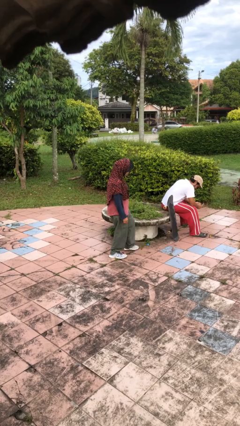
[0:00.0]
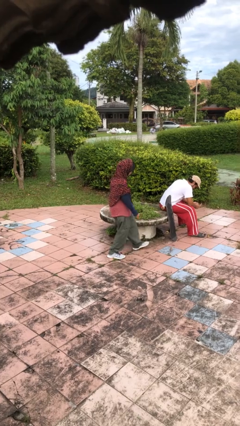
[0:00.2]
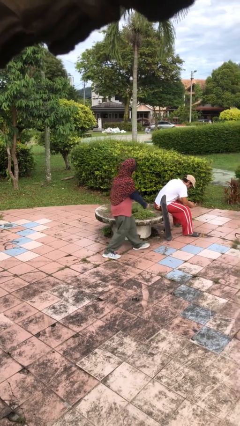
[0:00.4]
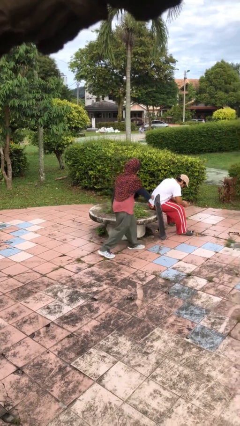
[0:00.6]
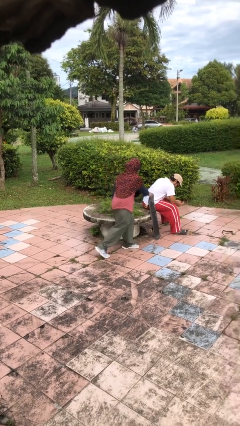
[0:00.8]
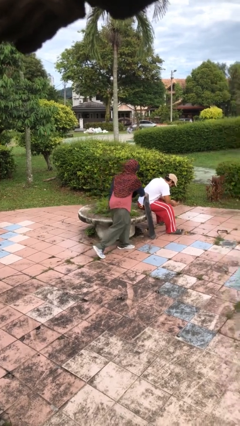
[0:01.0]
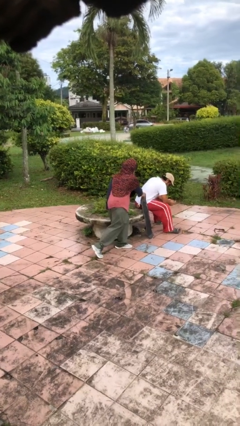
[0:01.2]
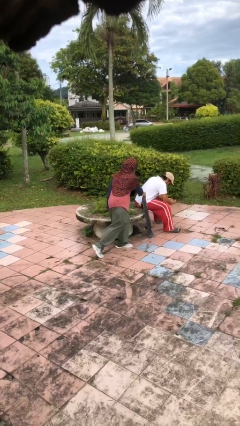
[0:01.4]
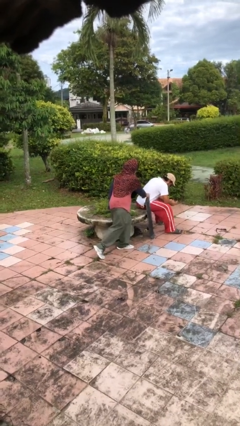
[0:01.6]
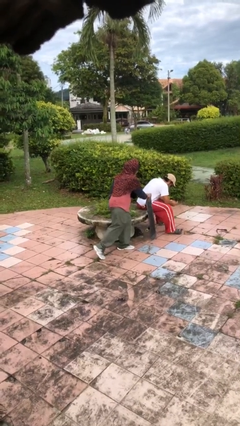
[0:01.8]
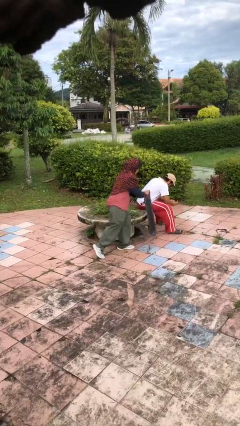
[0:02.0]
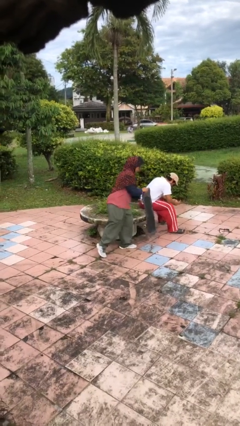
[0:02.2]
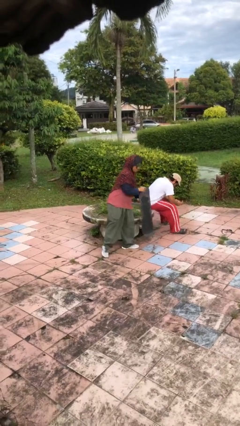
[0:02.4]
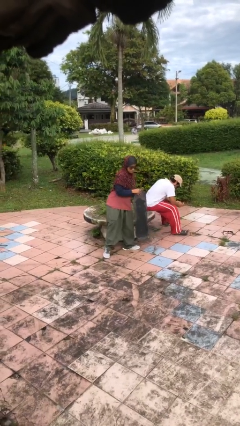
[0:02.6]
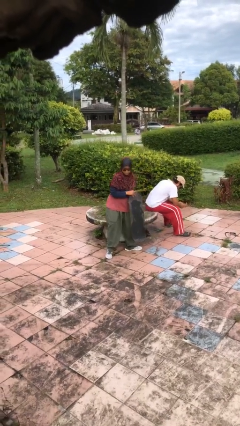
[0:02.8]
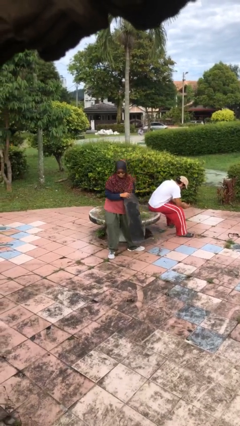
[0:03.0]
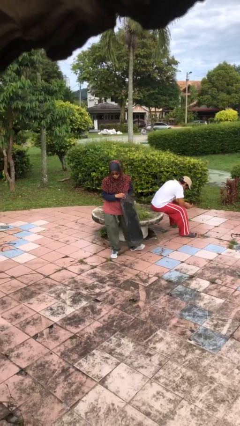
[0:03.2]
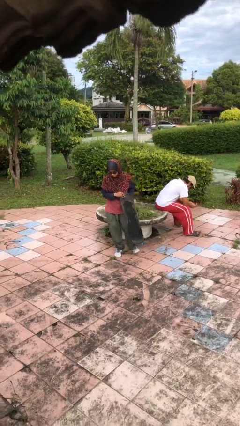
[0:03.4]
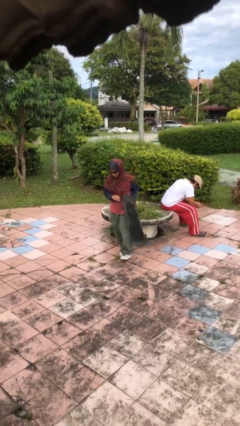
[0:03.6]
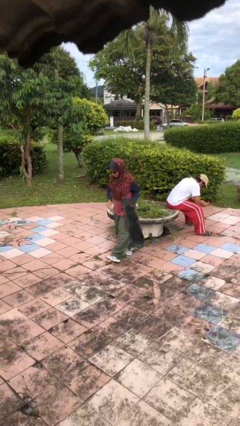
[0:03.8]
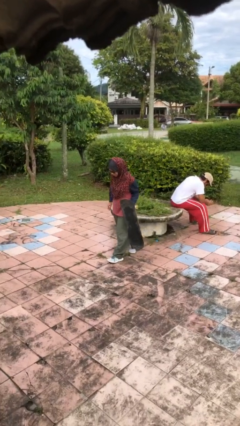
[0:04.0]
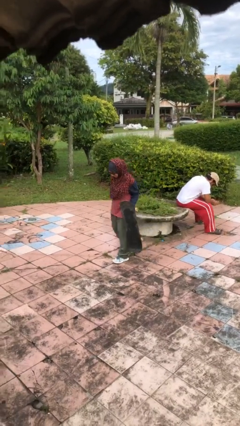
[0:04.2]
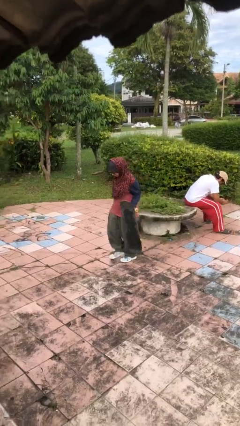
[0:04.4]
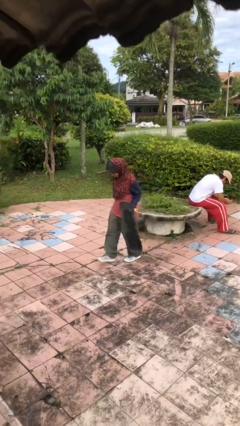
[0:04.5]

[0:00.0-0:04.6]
person steals object from person

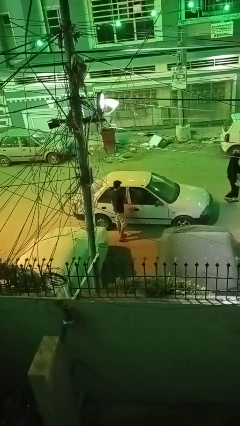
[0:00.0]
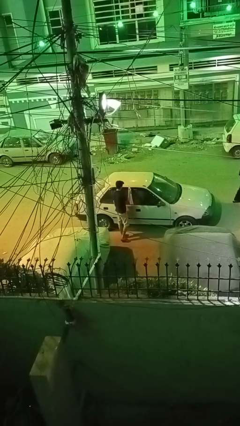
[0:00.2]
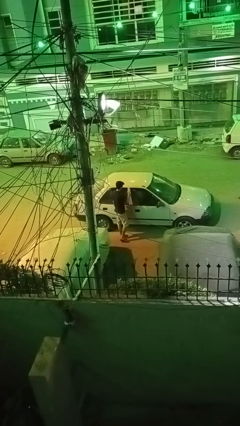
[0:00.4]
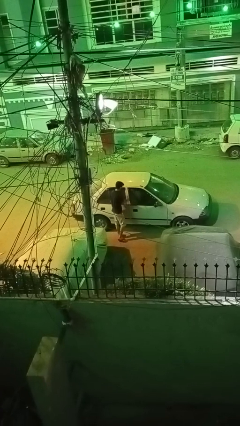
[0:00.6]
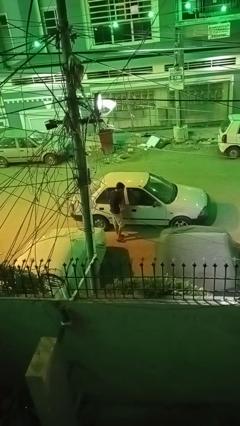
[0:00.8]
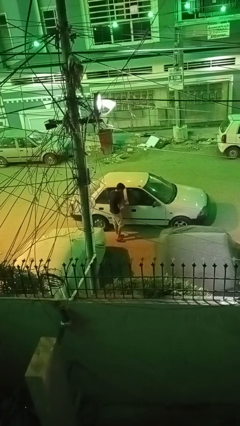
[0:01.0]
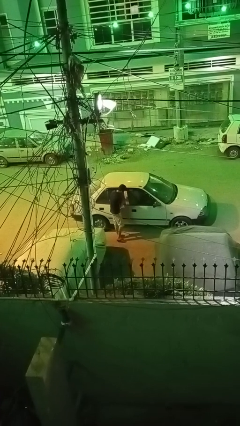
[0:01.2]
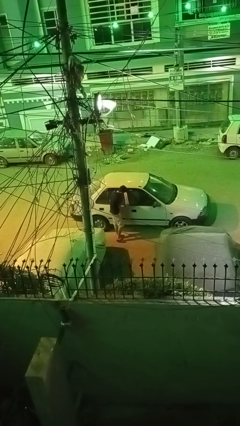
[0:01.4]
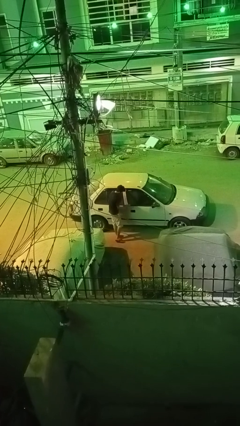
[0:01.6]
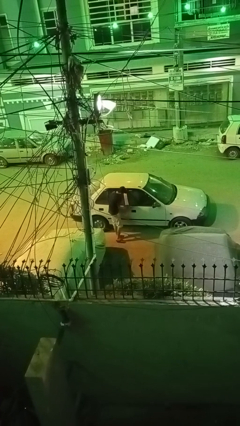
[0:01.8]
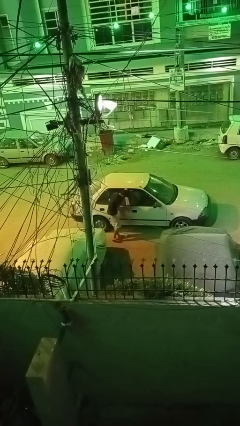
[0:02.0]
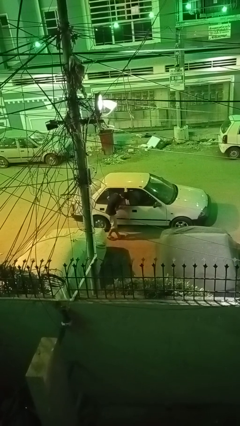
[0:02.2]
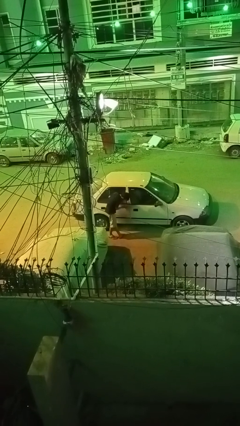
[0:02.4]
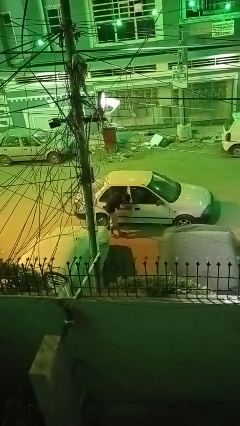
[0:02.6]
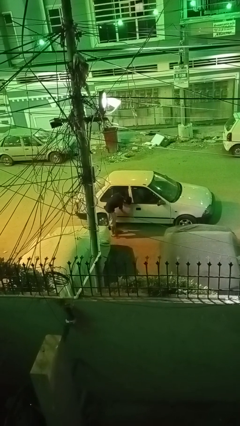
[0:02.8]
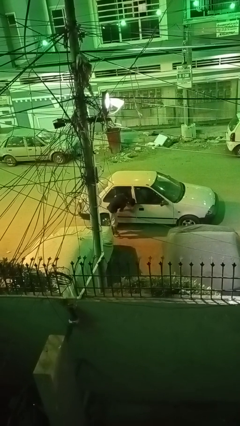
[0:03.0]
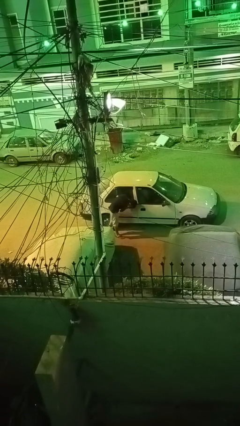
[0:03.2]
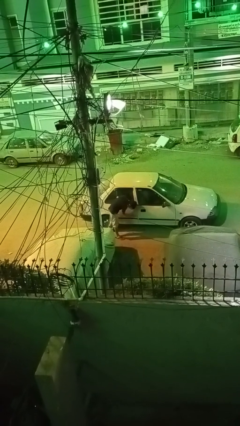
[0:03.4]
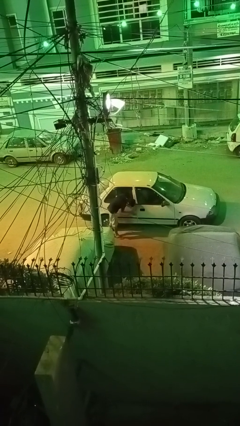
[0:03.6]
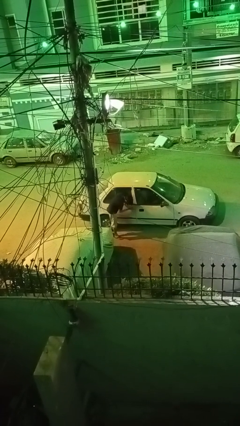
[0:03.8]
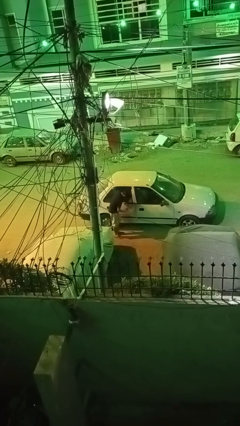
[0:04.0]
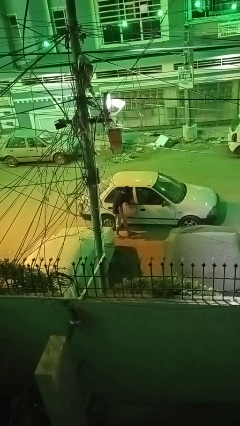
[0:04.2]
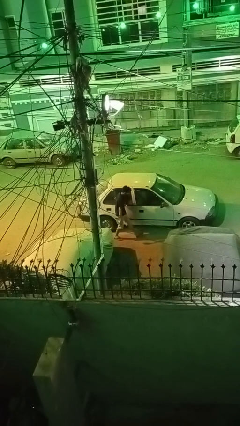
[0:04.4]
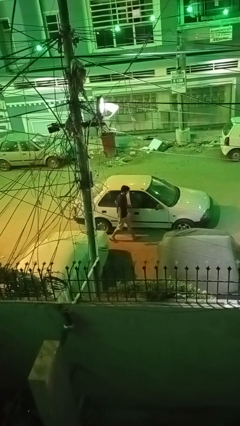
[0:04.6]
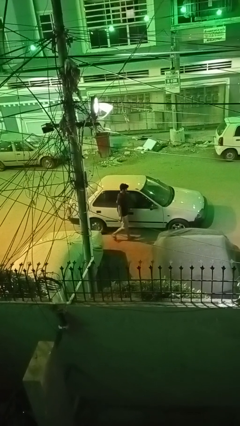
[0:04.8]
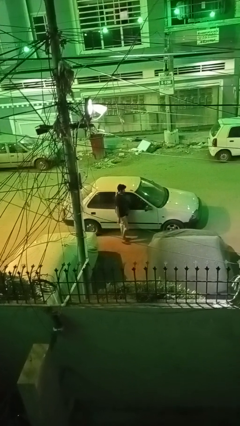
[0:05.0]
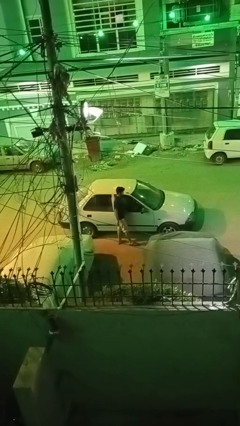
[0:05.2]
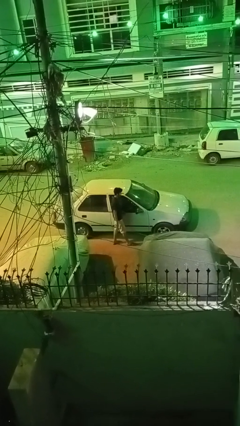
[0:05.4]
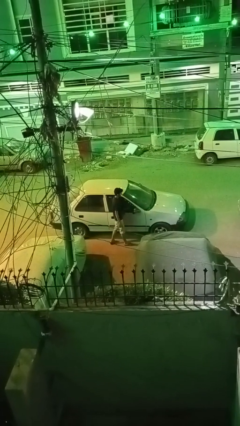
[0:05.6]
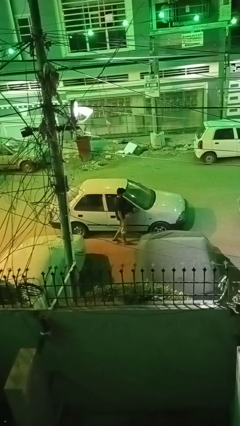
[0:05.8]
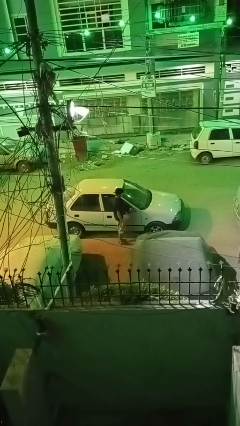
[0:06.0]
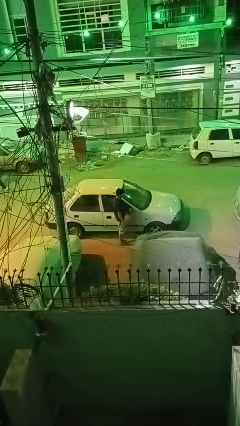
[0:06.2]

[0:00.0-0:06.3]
person polishes car with rag

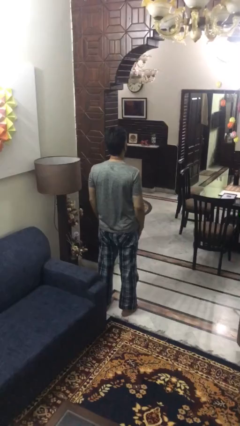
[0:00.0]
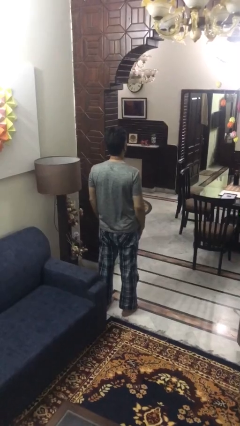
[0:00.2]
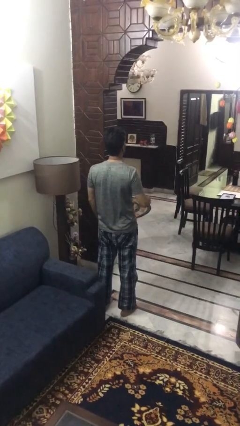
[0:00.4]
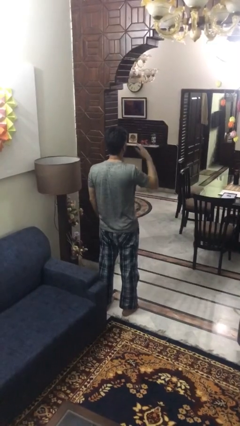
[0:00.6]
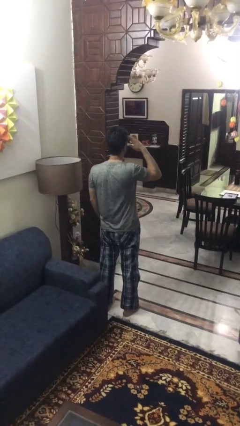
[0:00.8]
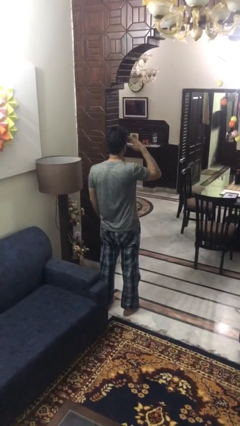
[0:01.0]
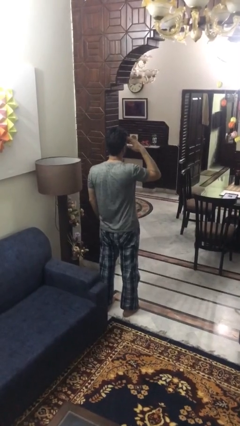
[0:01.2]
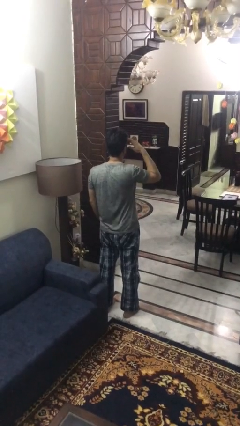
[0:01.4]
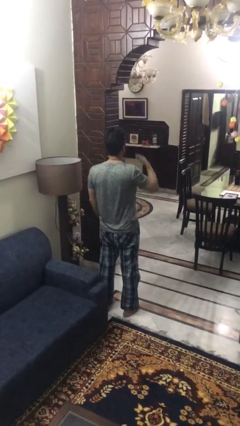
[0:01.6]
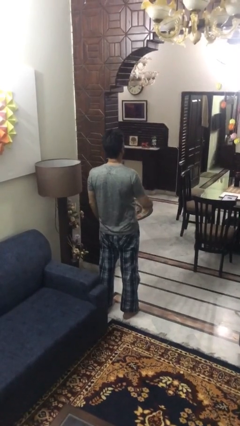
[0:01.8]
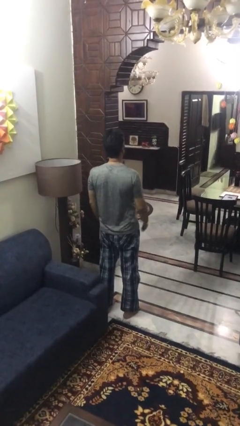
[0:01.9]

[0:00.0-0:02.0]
person salutes

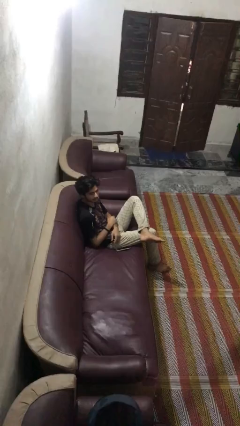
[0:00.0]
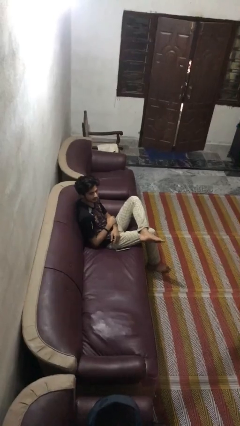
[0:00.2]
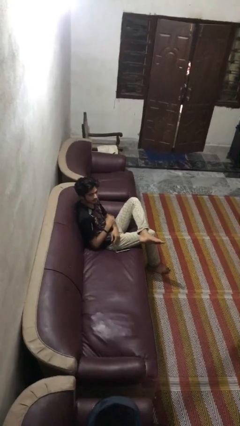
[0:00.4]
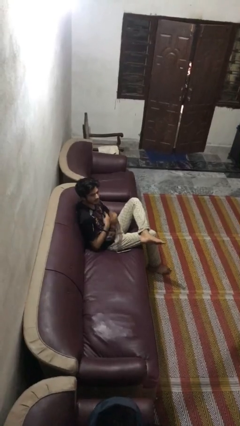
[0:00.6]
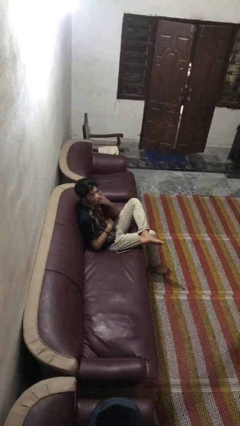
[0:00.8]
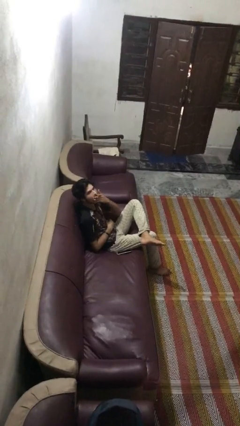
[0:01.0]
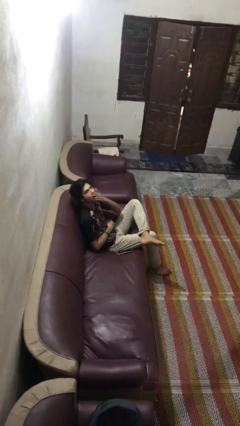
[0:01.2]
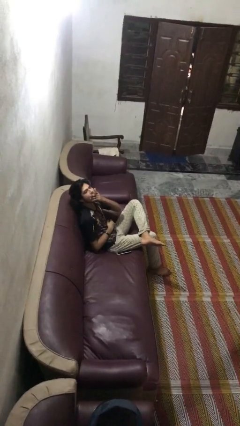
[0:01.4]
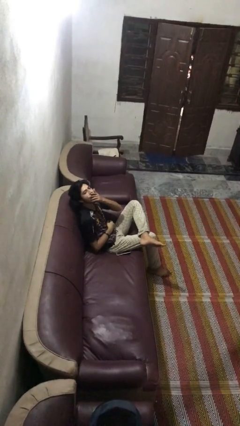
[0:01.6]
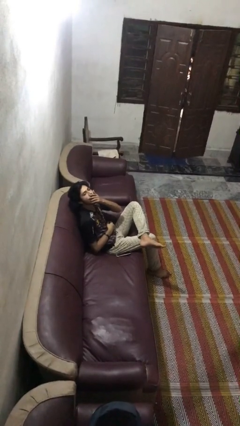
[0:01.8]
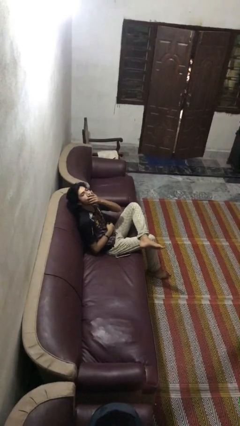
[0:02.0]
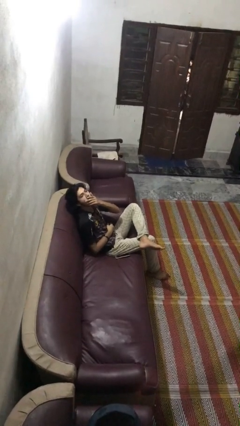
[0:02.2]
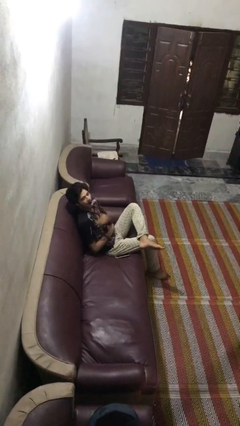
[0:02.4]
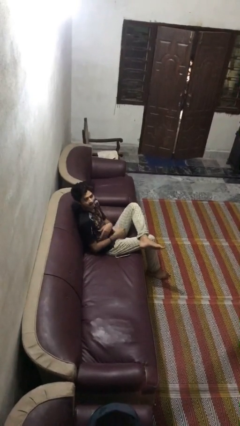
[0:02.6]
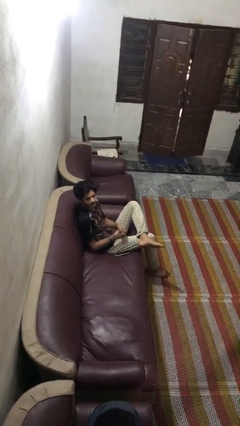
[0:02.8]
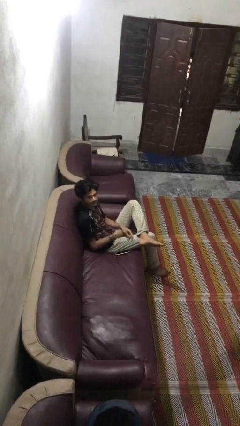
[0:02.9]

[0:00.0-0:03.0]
person yawns

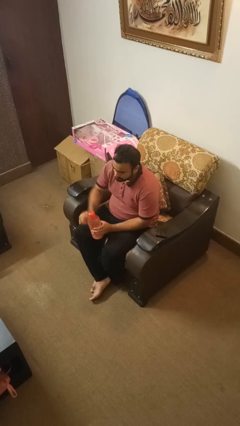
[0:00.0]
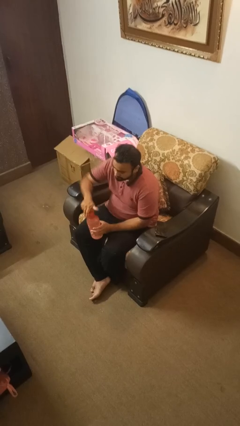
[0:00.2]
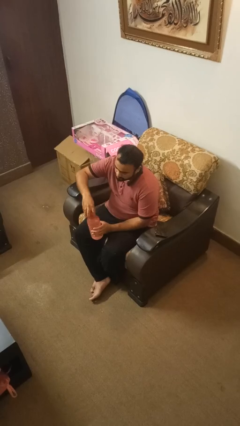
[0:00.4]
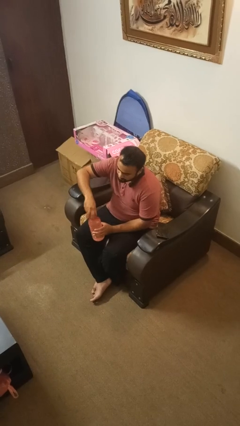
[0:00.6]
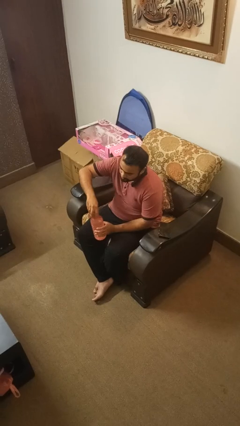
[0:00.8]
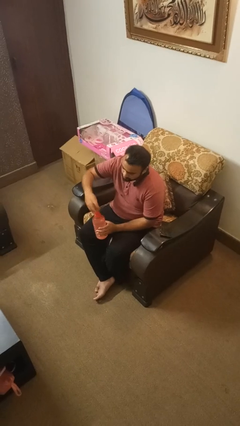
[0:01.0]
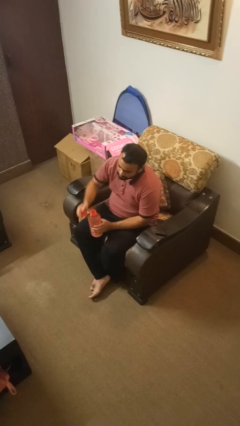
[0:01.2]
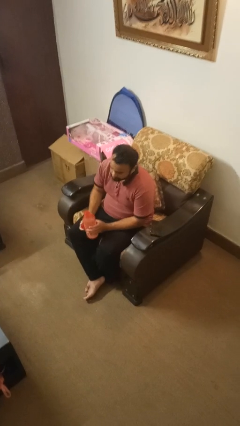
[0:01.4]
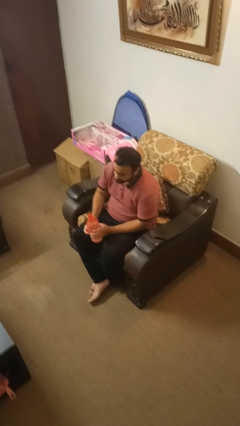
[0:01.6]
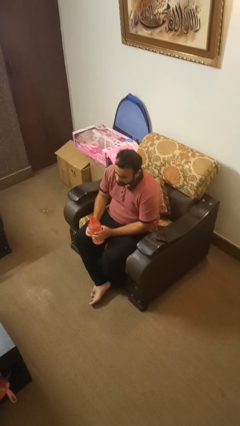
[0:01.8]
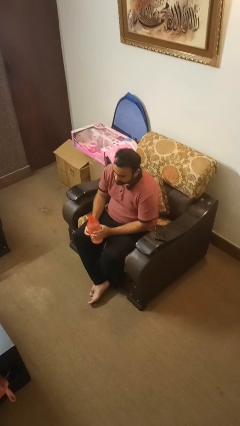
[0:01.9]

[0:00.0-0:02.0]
person unscrews lid from bottle
